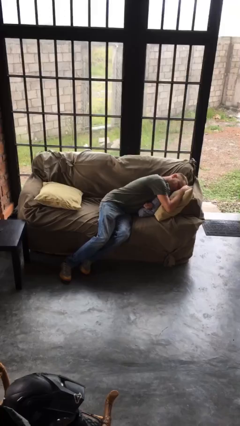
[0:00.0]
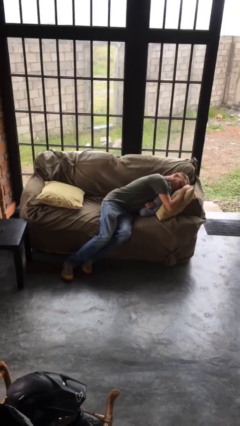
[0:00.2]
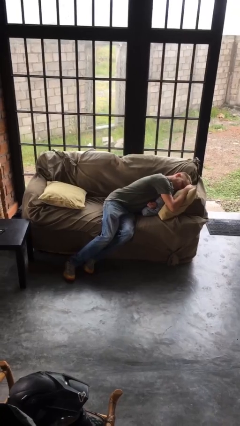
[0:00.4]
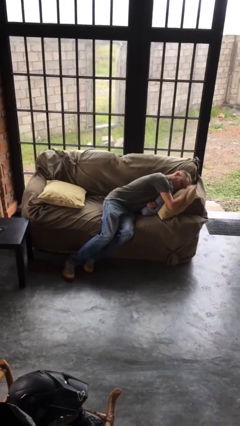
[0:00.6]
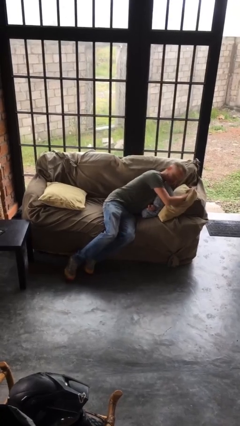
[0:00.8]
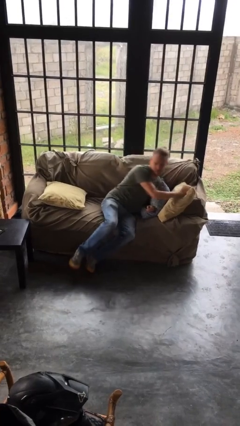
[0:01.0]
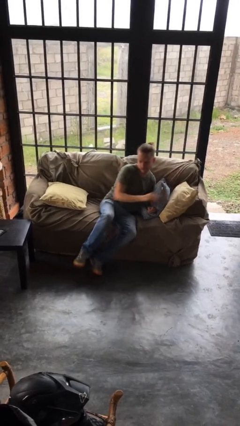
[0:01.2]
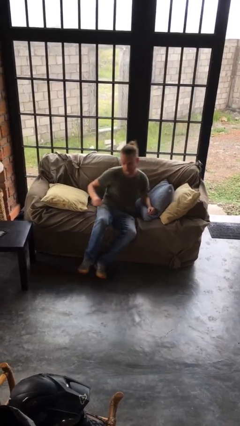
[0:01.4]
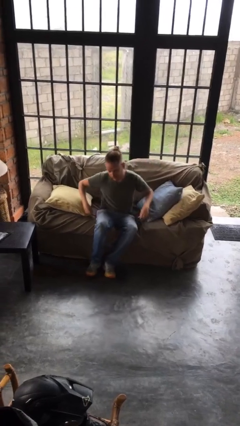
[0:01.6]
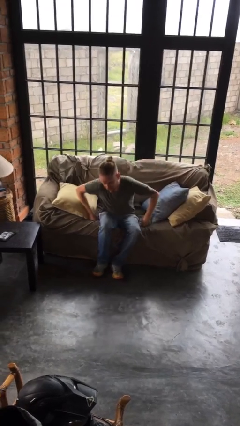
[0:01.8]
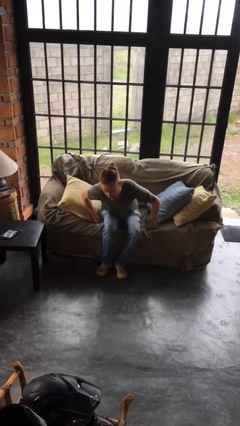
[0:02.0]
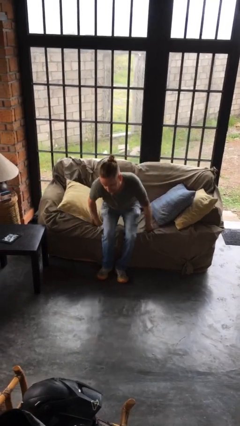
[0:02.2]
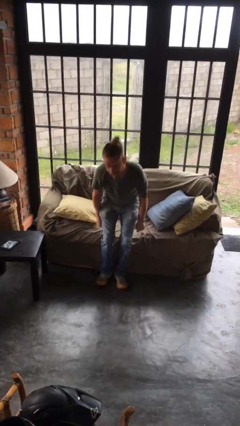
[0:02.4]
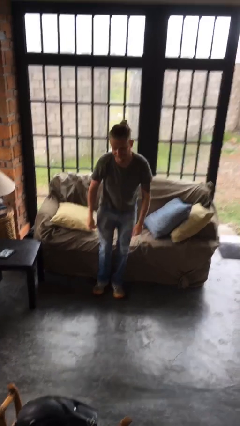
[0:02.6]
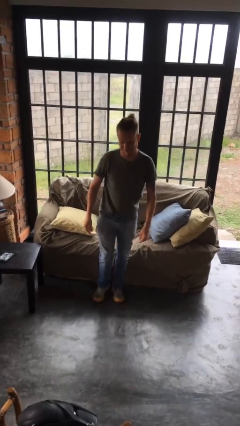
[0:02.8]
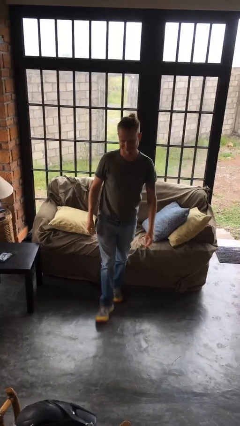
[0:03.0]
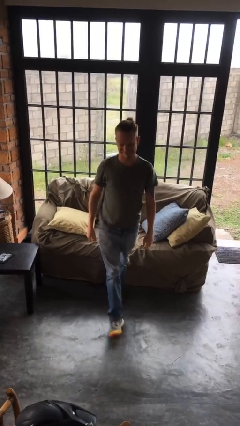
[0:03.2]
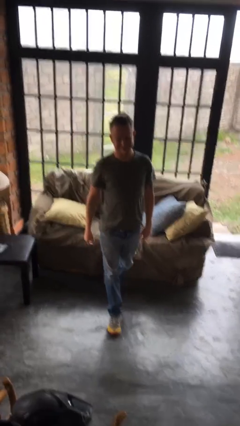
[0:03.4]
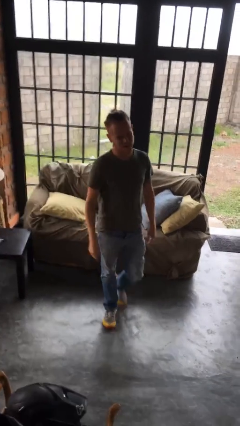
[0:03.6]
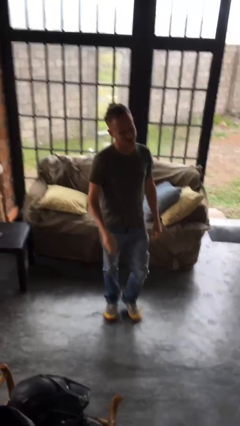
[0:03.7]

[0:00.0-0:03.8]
person stands up

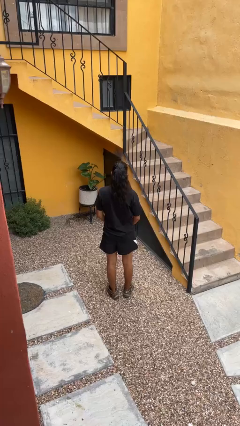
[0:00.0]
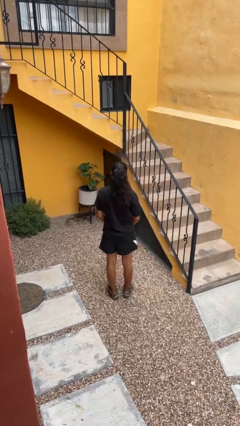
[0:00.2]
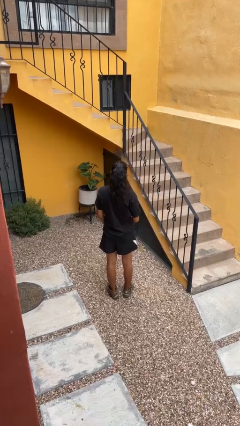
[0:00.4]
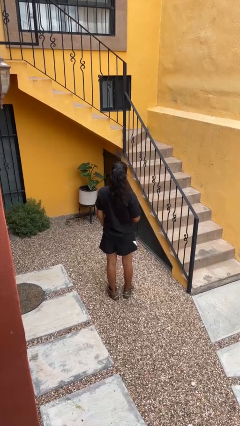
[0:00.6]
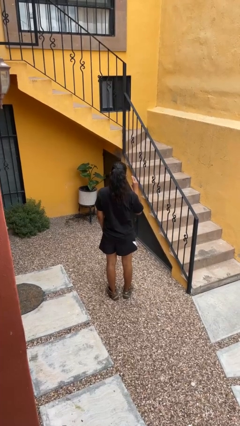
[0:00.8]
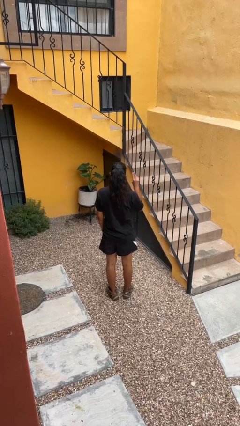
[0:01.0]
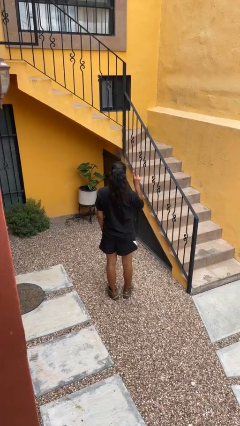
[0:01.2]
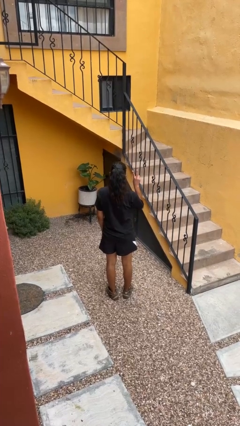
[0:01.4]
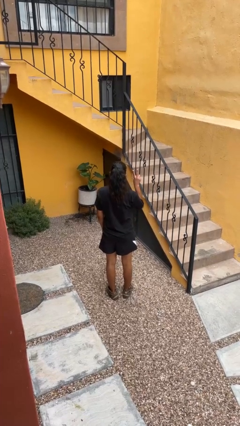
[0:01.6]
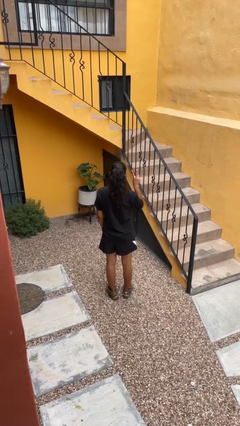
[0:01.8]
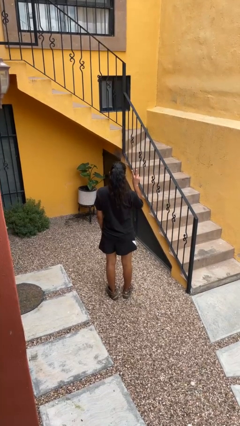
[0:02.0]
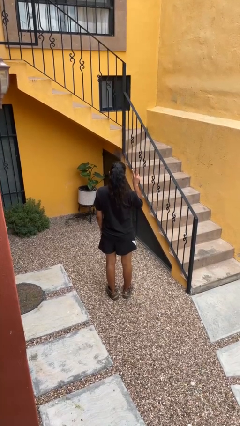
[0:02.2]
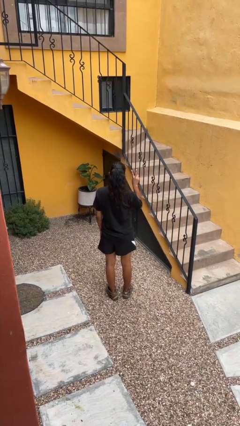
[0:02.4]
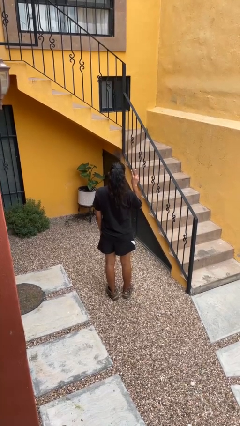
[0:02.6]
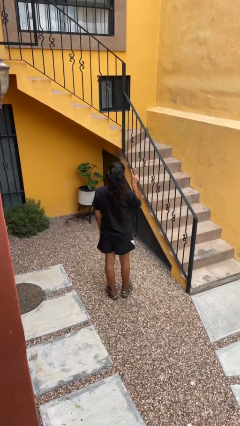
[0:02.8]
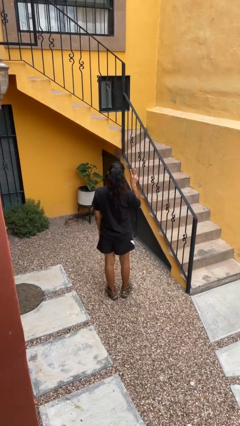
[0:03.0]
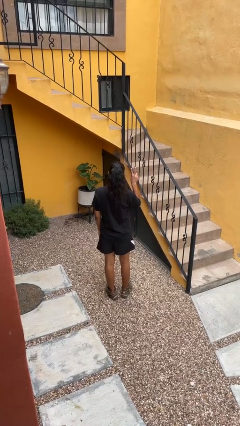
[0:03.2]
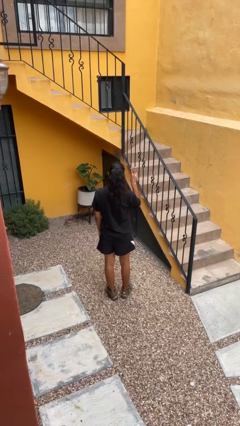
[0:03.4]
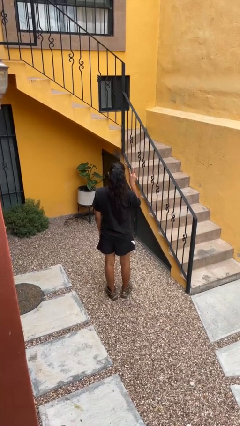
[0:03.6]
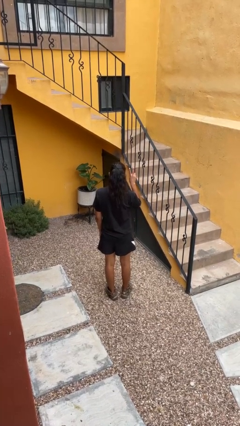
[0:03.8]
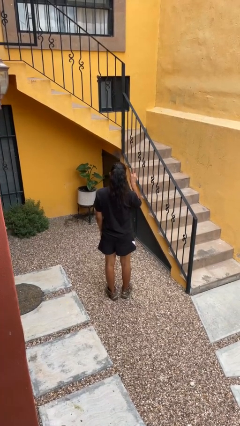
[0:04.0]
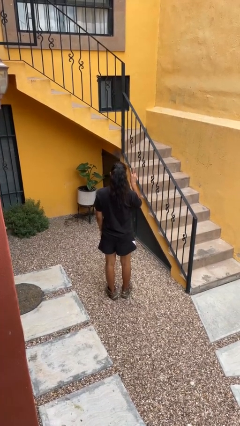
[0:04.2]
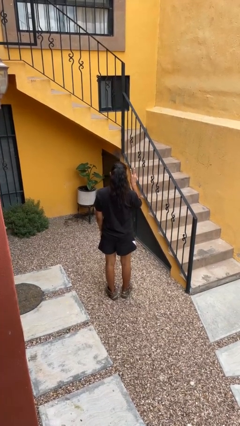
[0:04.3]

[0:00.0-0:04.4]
person gestures peace

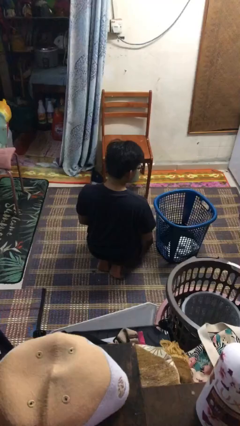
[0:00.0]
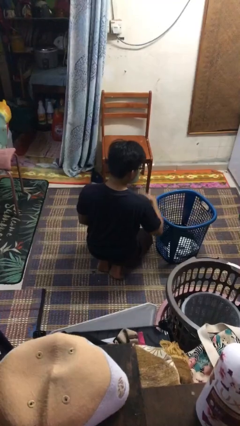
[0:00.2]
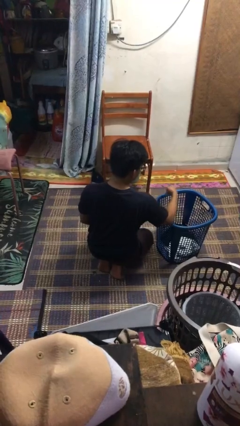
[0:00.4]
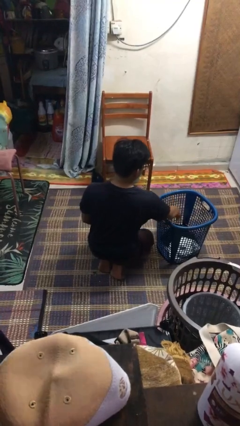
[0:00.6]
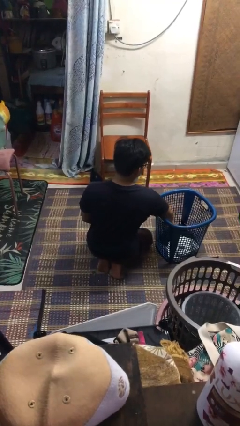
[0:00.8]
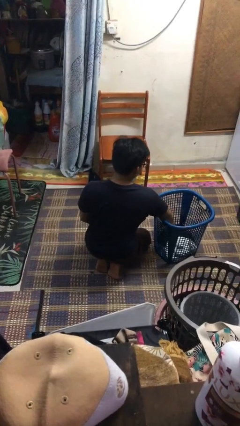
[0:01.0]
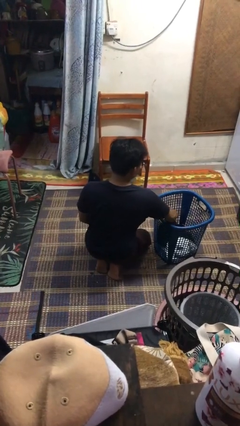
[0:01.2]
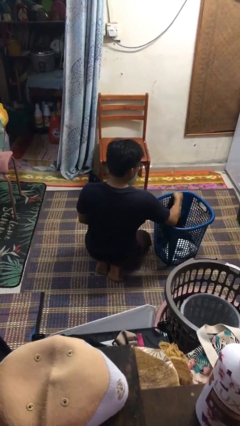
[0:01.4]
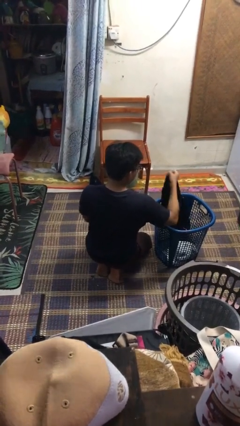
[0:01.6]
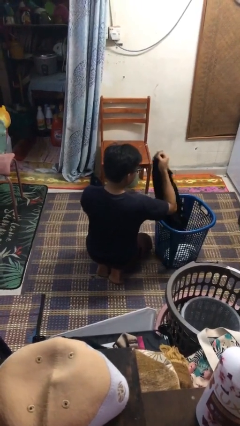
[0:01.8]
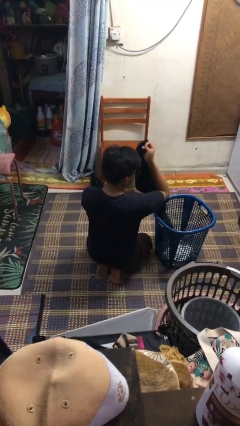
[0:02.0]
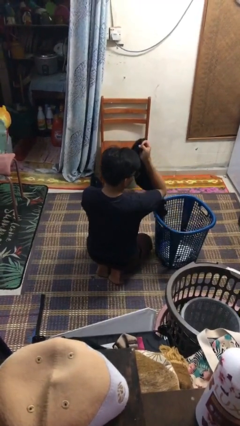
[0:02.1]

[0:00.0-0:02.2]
person takes object from basket

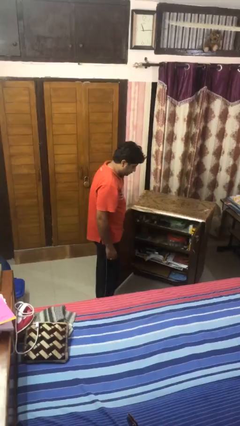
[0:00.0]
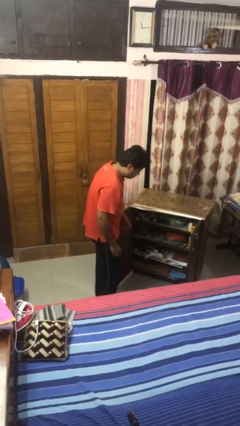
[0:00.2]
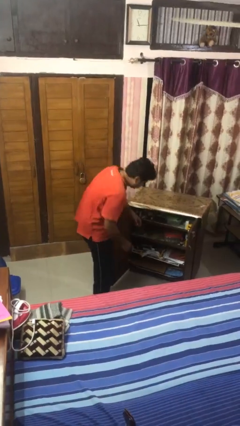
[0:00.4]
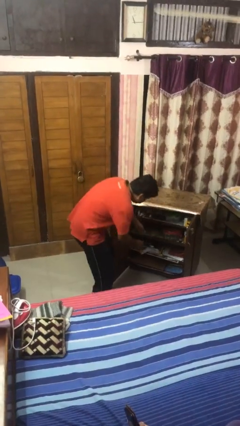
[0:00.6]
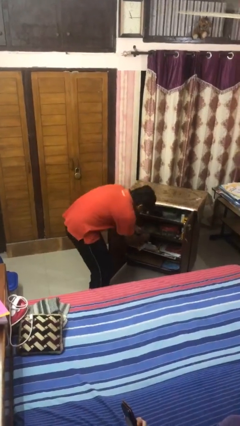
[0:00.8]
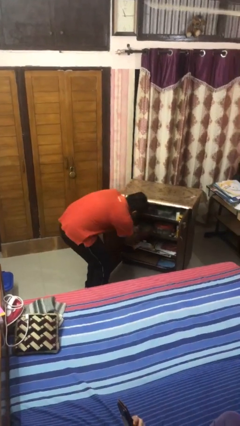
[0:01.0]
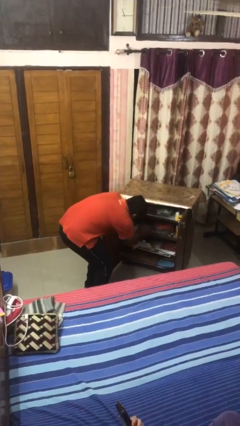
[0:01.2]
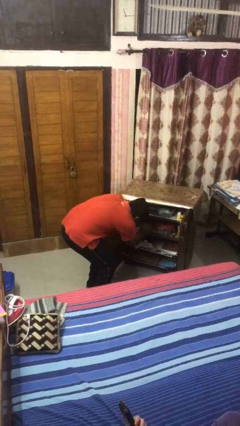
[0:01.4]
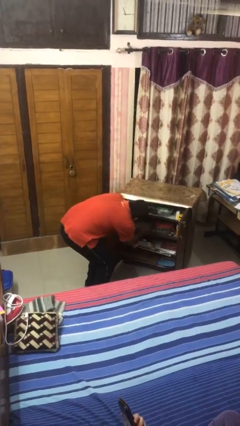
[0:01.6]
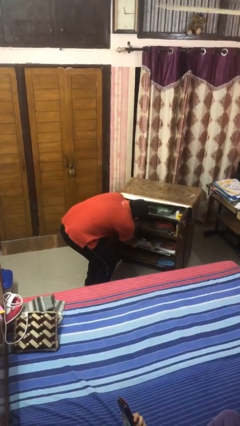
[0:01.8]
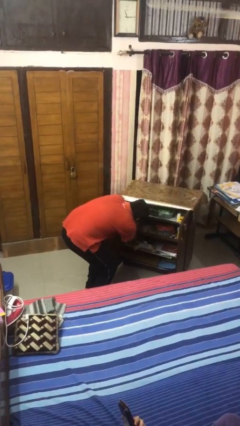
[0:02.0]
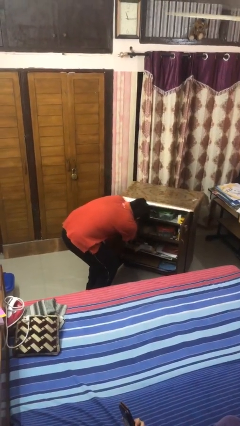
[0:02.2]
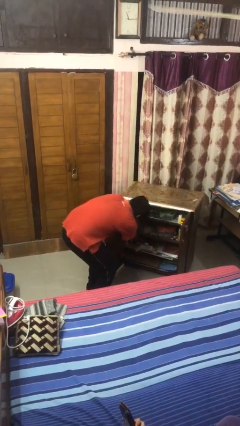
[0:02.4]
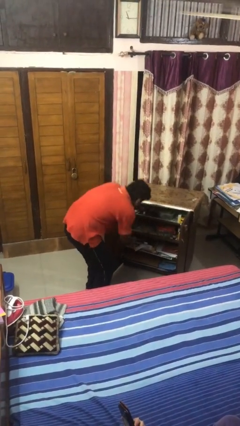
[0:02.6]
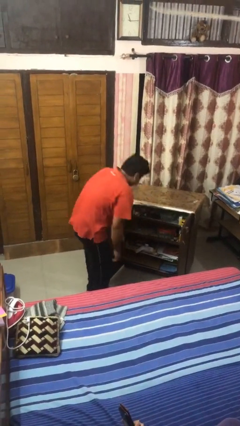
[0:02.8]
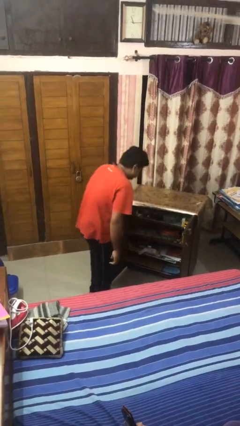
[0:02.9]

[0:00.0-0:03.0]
person searches in cabinet

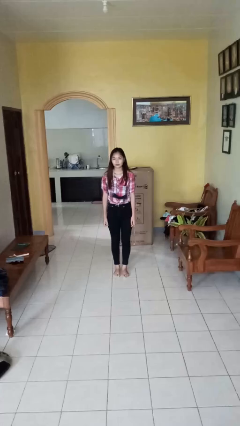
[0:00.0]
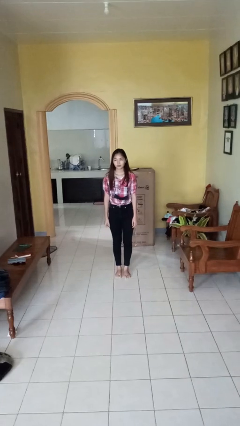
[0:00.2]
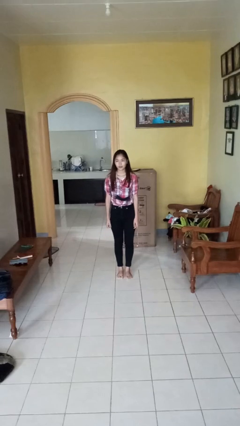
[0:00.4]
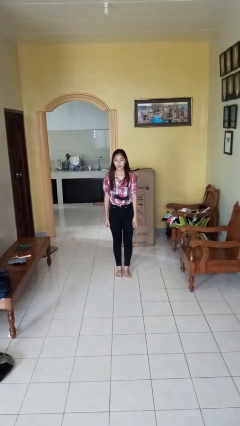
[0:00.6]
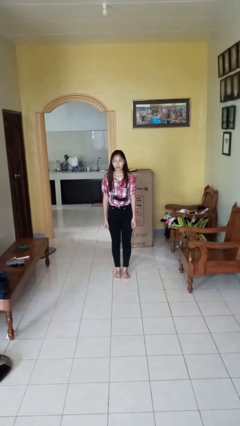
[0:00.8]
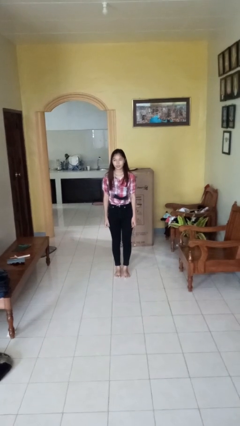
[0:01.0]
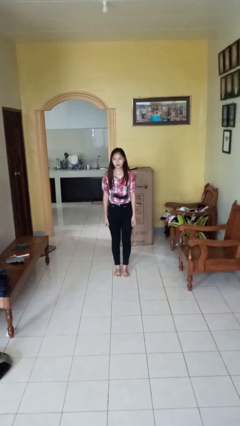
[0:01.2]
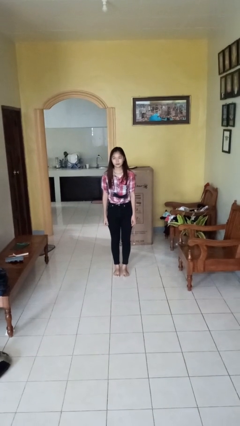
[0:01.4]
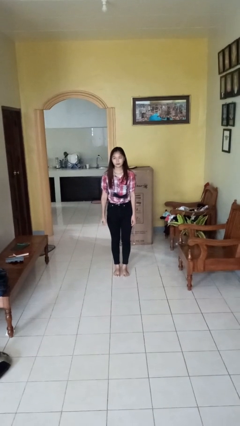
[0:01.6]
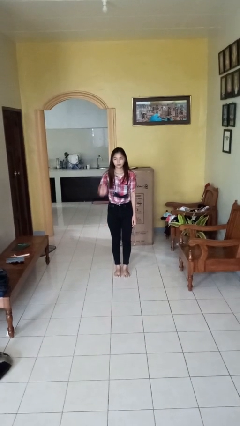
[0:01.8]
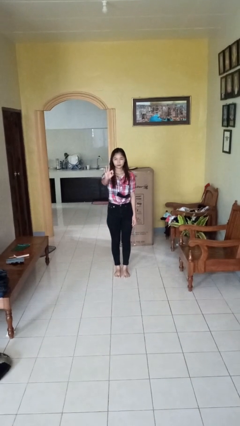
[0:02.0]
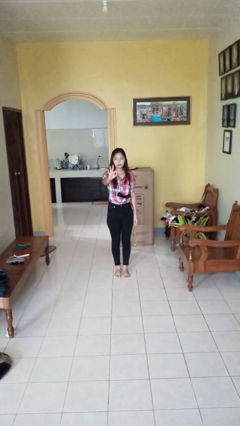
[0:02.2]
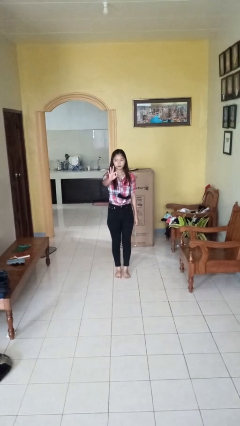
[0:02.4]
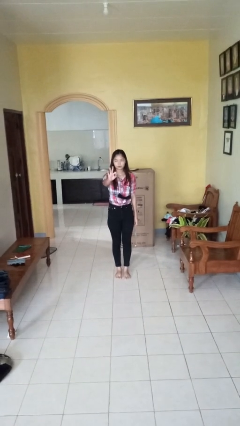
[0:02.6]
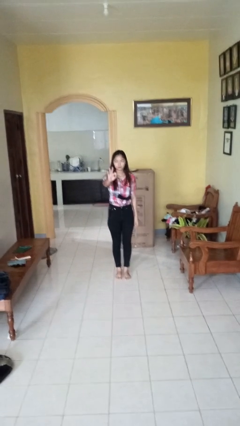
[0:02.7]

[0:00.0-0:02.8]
person gestures number three

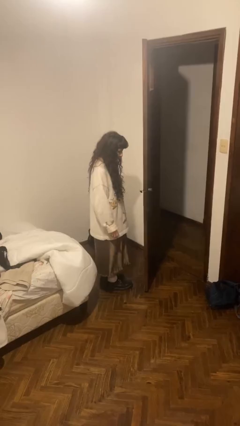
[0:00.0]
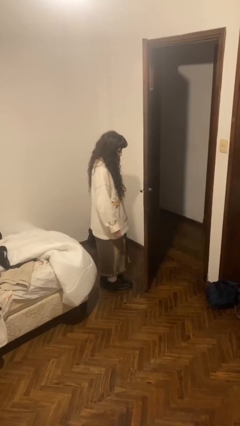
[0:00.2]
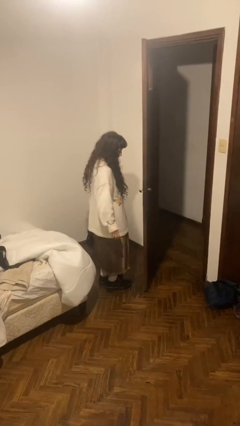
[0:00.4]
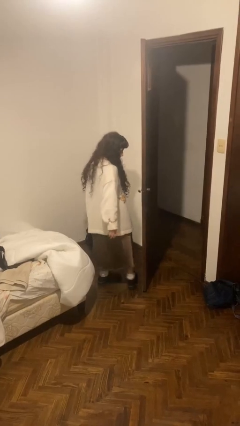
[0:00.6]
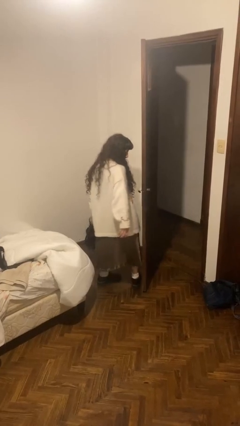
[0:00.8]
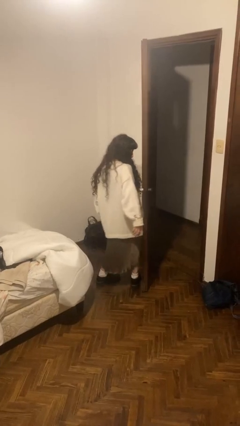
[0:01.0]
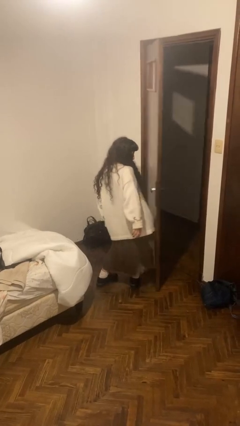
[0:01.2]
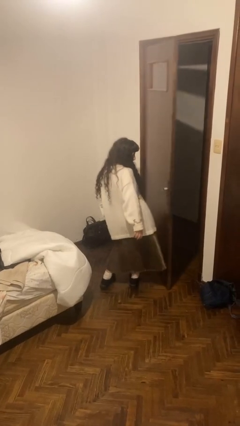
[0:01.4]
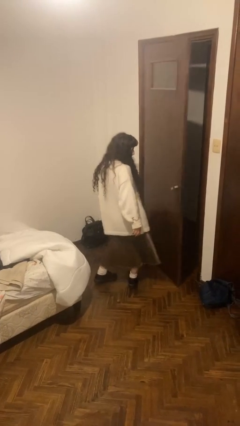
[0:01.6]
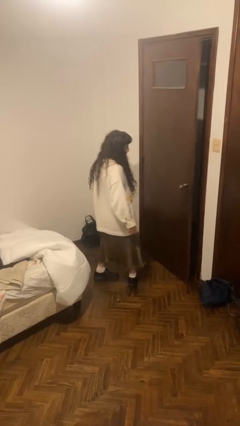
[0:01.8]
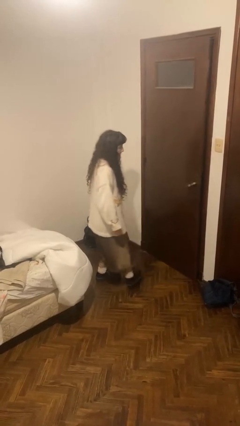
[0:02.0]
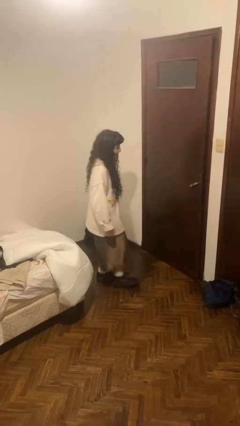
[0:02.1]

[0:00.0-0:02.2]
person closes door with hip
